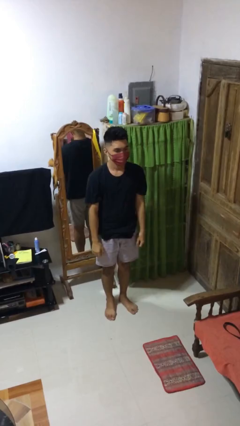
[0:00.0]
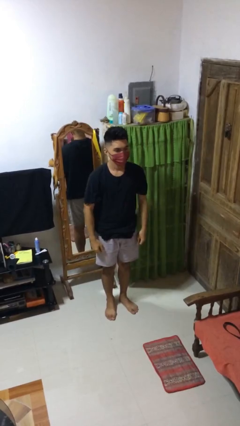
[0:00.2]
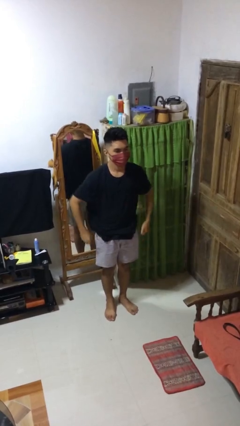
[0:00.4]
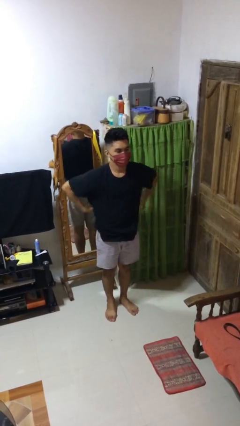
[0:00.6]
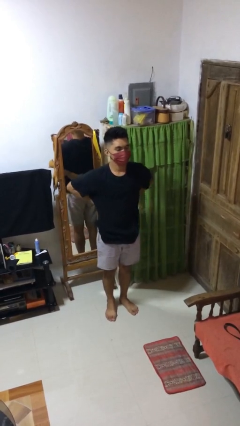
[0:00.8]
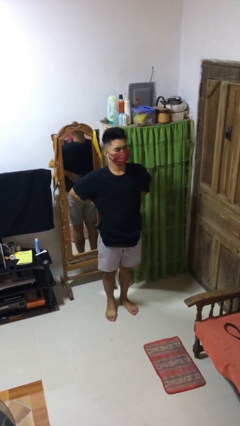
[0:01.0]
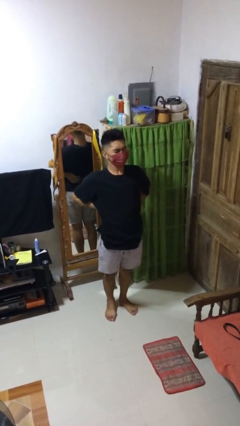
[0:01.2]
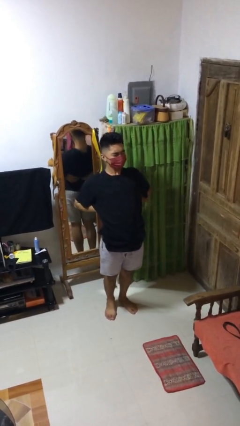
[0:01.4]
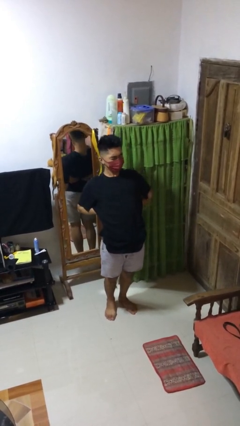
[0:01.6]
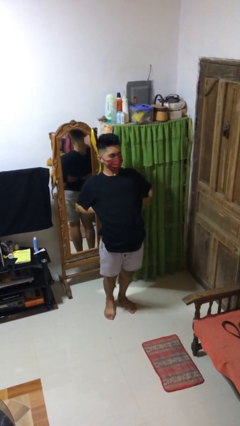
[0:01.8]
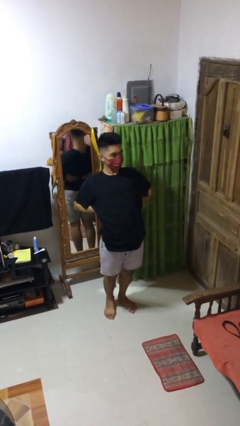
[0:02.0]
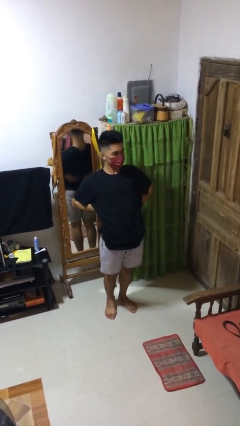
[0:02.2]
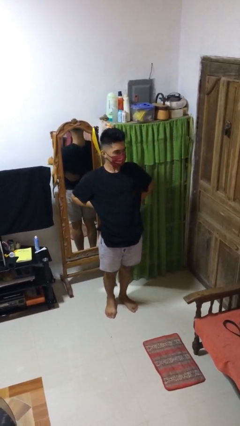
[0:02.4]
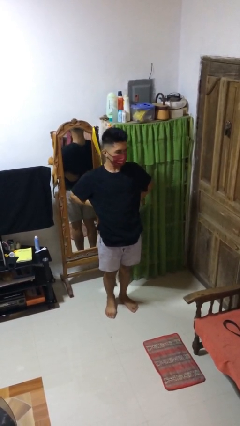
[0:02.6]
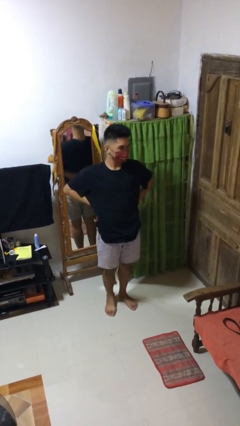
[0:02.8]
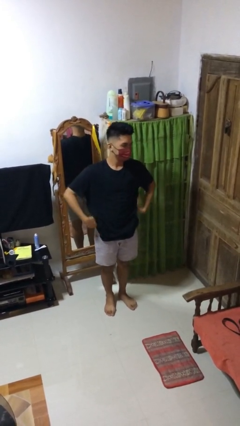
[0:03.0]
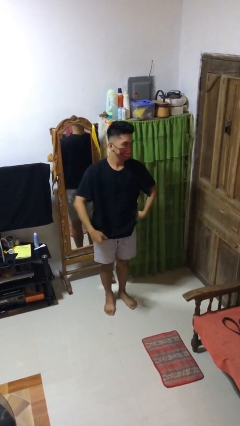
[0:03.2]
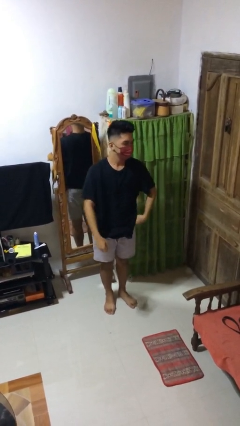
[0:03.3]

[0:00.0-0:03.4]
person stretches back

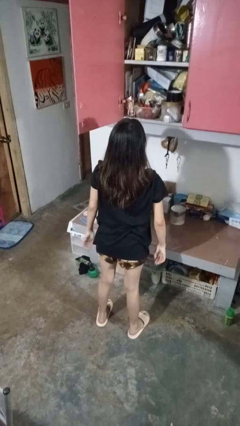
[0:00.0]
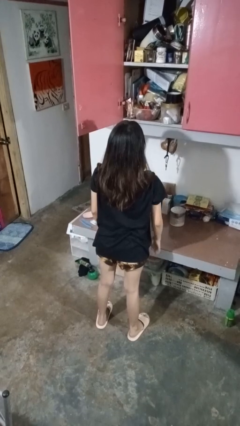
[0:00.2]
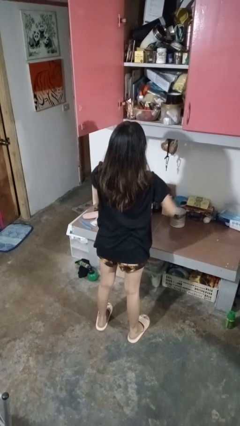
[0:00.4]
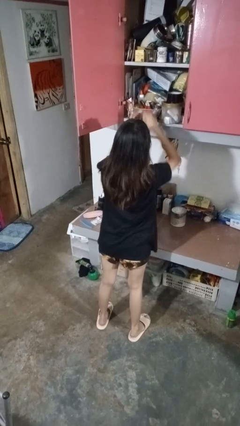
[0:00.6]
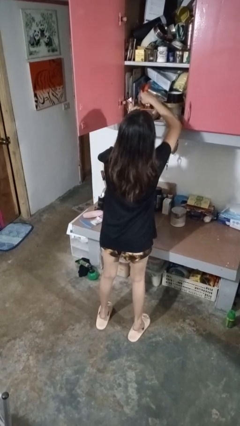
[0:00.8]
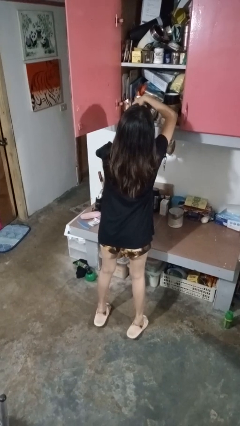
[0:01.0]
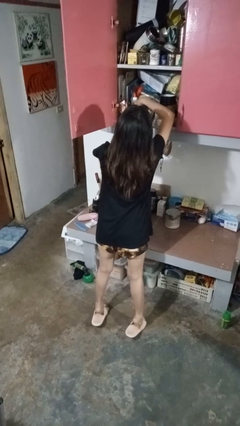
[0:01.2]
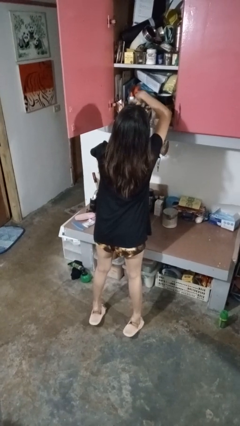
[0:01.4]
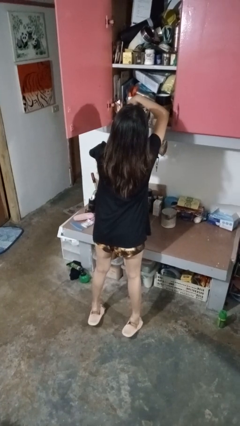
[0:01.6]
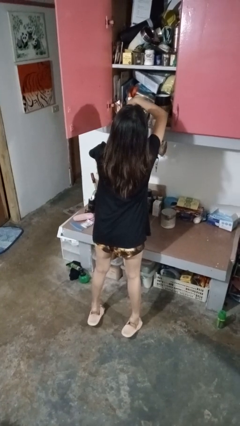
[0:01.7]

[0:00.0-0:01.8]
person searches in cabinet

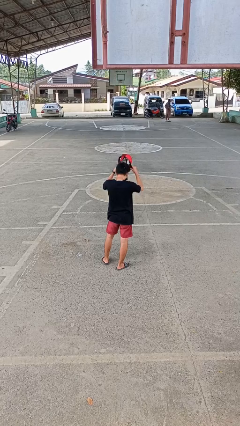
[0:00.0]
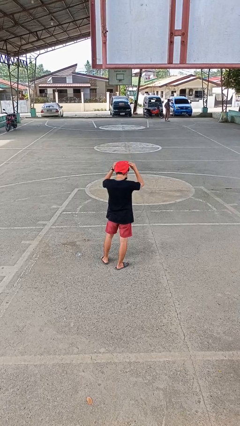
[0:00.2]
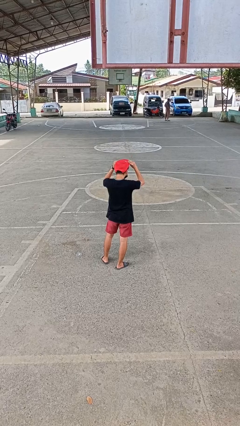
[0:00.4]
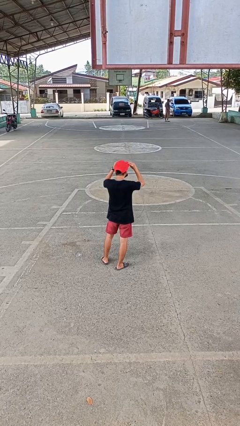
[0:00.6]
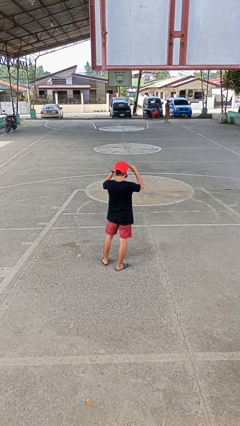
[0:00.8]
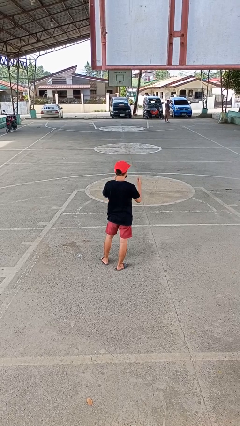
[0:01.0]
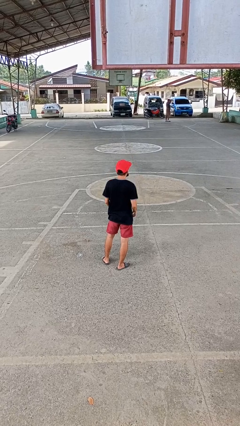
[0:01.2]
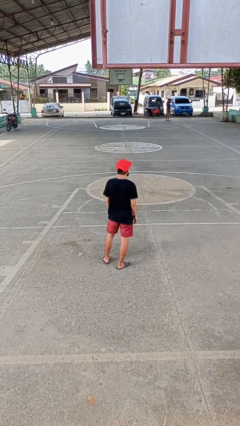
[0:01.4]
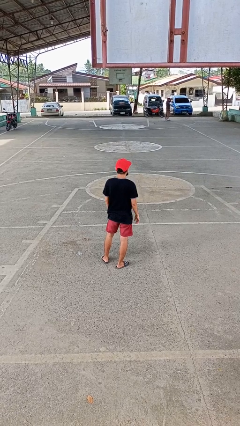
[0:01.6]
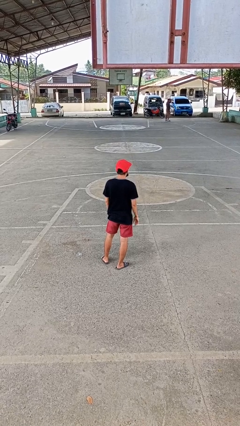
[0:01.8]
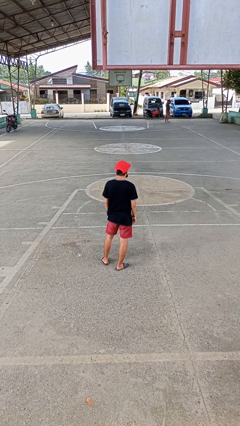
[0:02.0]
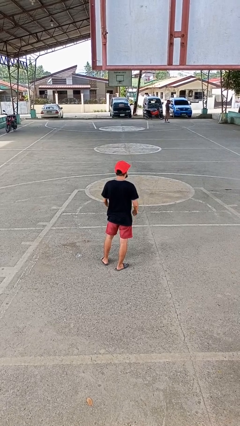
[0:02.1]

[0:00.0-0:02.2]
person puts on hat

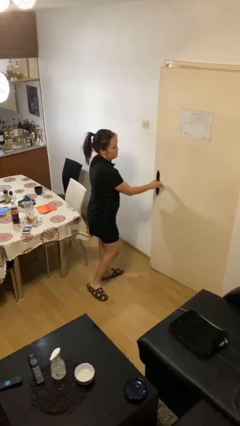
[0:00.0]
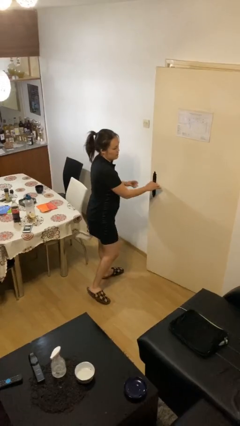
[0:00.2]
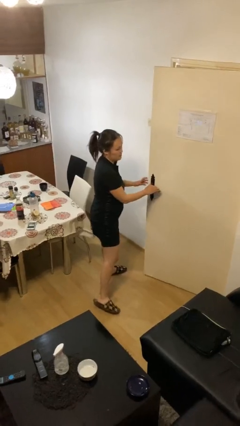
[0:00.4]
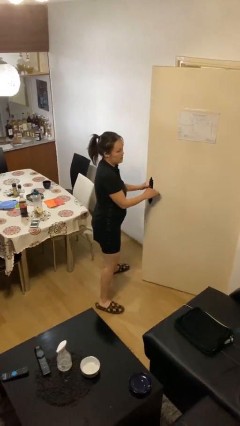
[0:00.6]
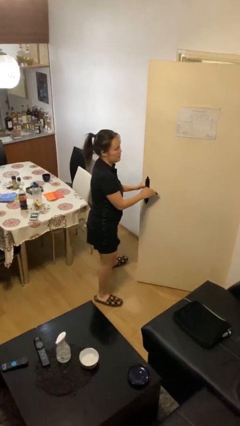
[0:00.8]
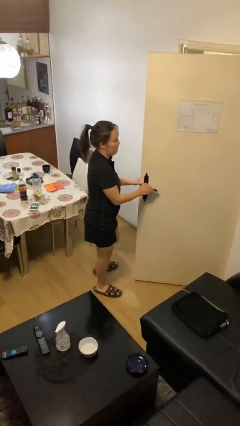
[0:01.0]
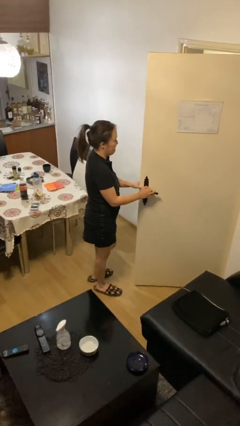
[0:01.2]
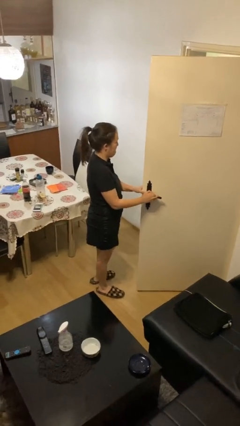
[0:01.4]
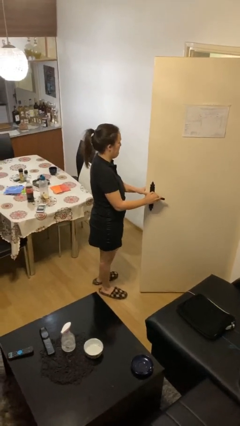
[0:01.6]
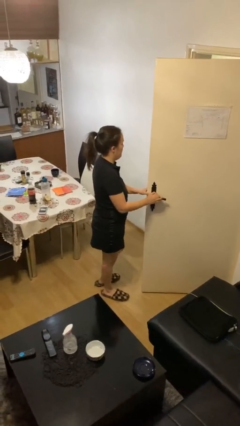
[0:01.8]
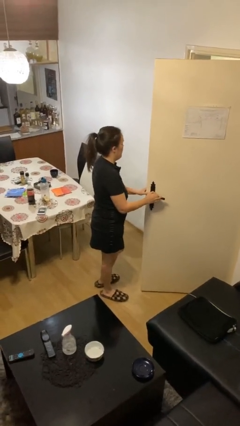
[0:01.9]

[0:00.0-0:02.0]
person opens facility door

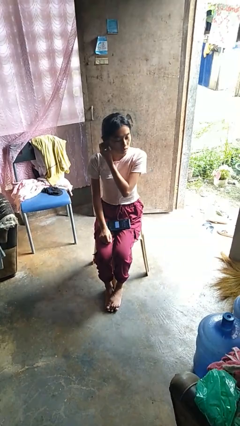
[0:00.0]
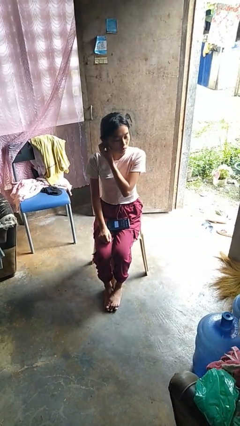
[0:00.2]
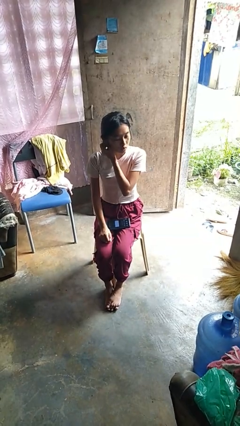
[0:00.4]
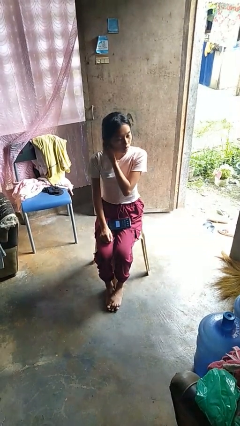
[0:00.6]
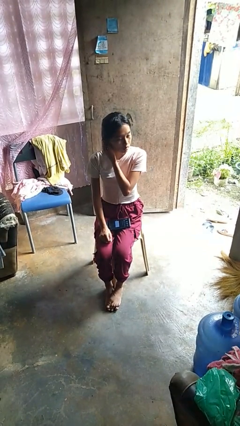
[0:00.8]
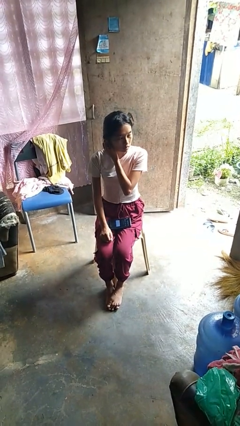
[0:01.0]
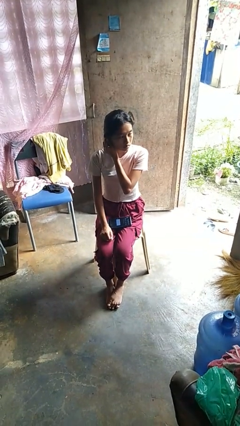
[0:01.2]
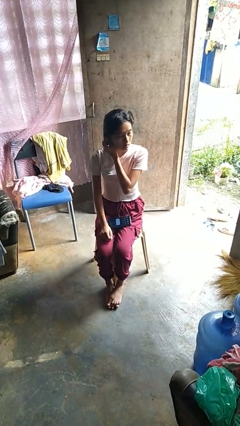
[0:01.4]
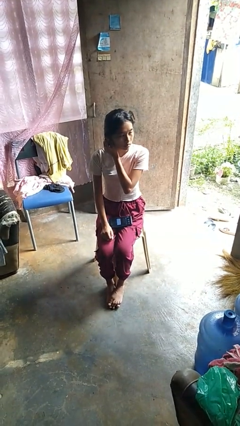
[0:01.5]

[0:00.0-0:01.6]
person touches earlobe

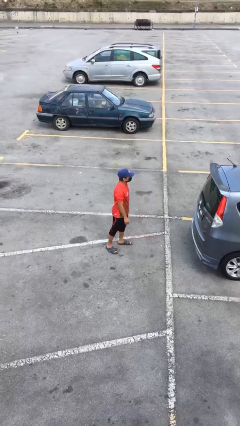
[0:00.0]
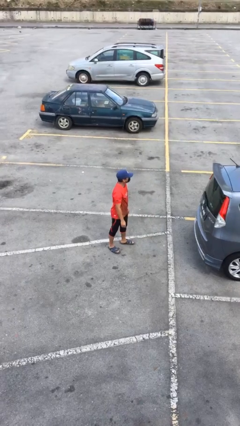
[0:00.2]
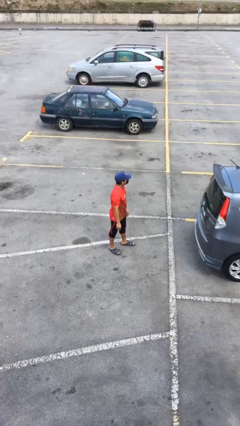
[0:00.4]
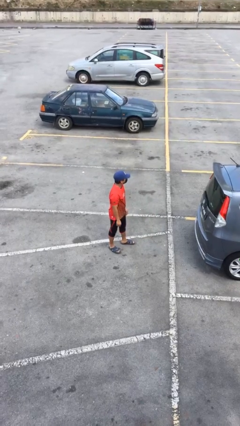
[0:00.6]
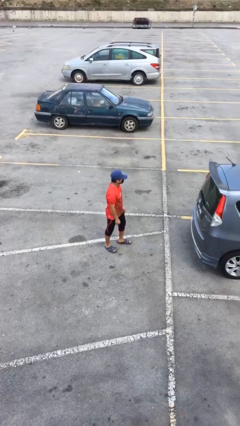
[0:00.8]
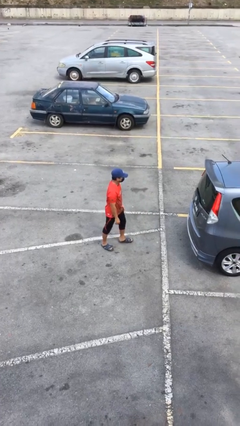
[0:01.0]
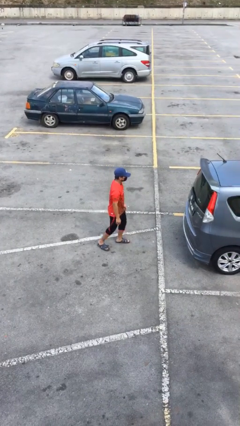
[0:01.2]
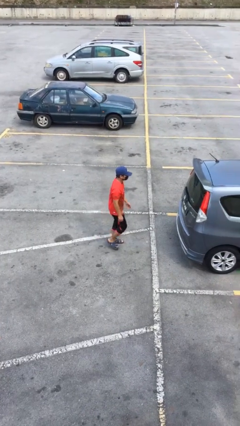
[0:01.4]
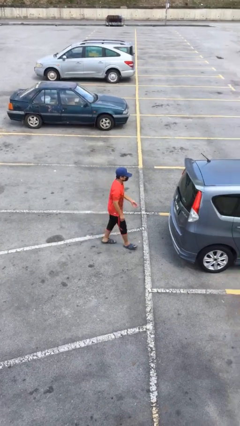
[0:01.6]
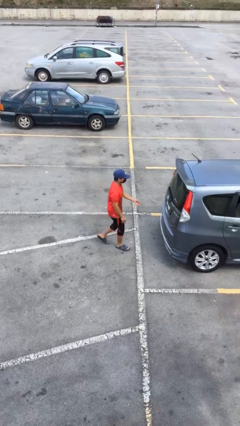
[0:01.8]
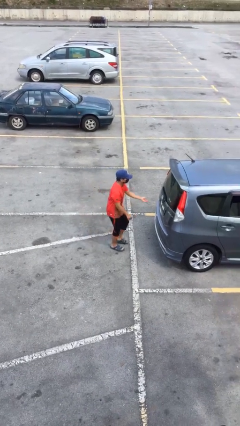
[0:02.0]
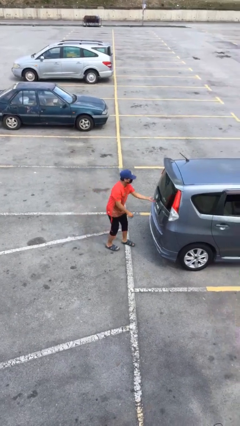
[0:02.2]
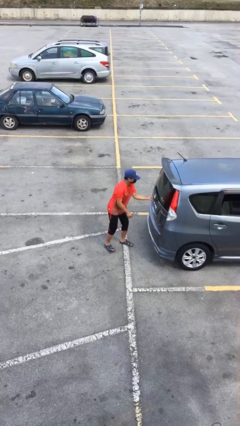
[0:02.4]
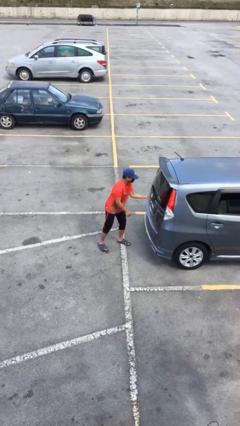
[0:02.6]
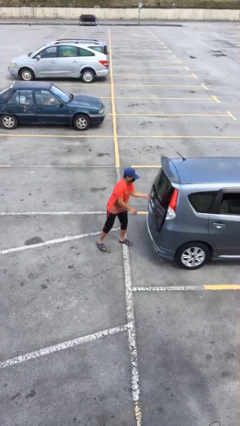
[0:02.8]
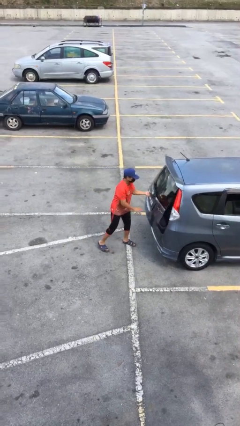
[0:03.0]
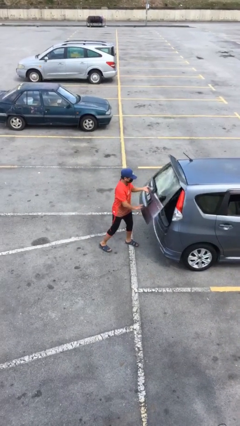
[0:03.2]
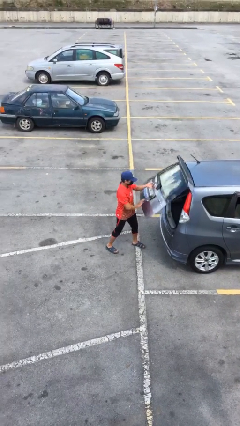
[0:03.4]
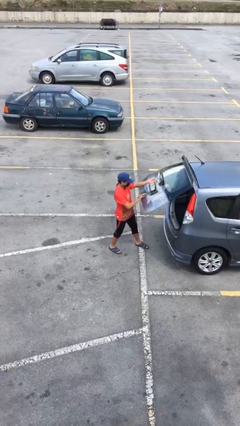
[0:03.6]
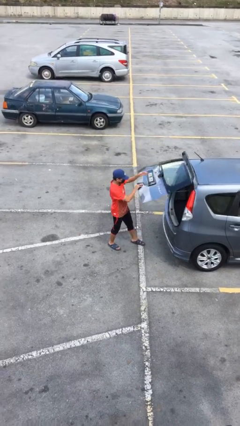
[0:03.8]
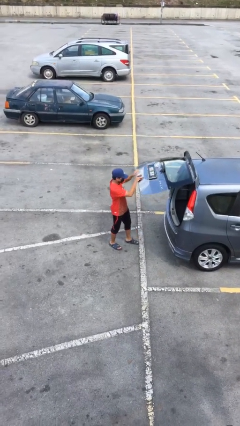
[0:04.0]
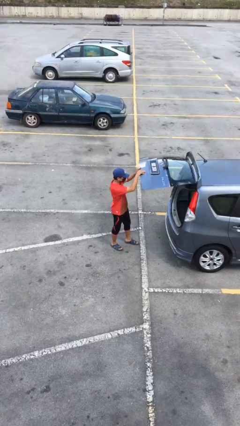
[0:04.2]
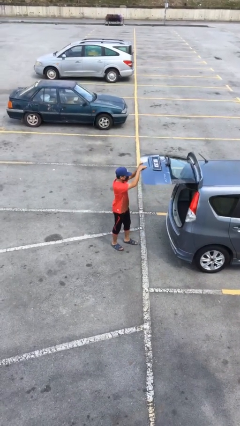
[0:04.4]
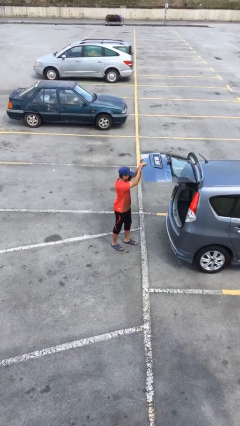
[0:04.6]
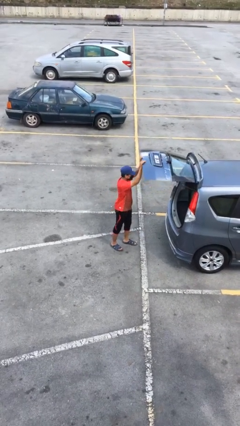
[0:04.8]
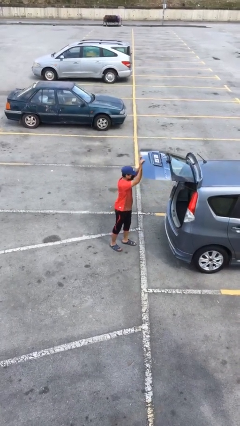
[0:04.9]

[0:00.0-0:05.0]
person opens car trunk

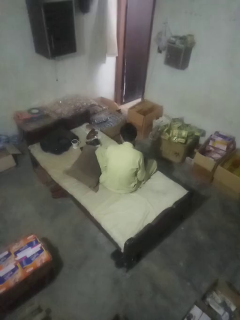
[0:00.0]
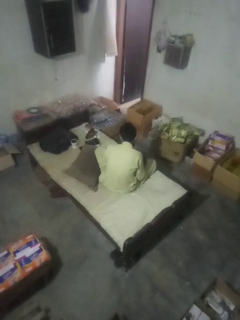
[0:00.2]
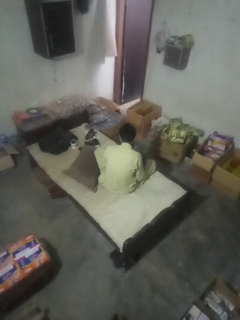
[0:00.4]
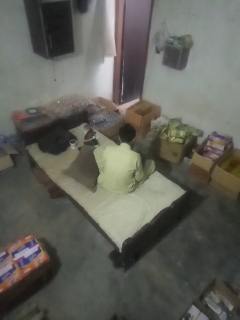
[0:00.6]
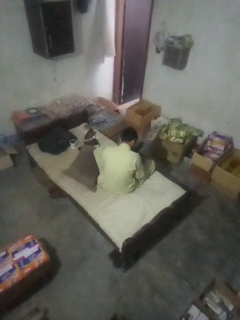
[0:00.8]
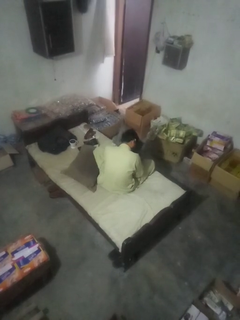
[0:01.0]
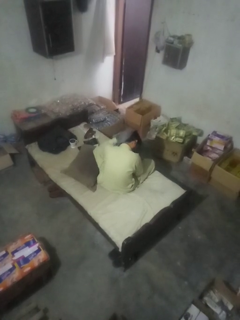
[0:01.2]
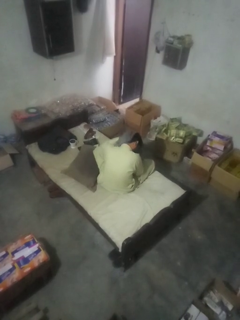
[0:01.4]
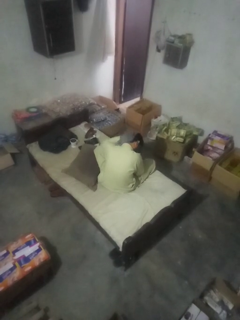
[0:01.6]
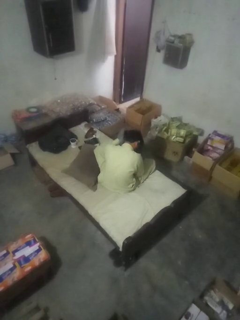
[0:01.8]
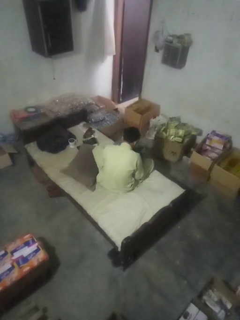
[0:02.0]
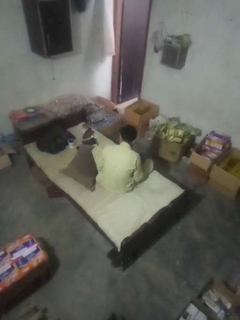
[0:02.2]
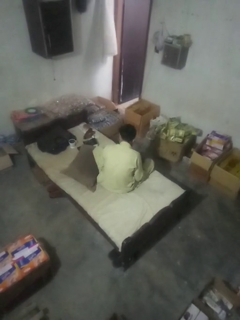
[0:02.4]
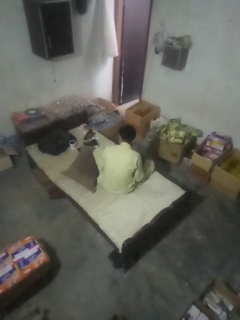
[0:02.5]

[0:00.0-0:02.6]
person dries hair with hairdryer
